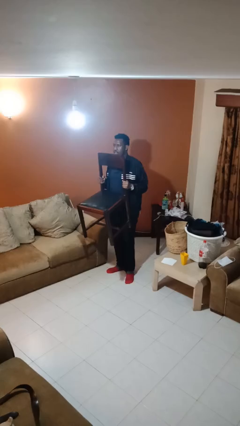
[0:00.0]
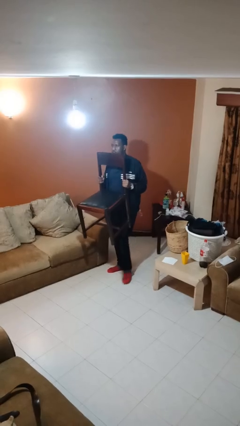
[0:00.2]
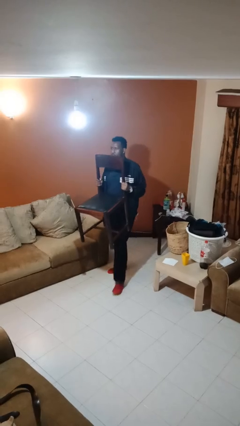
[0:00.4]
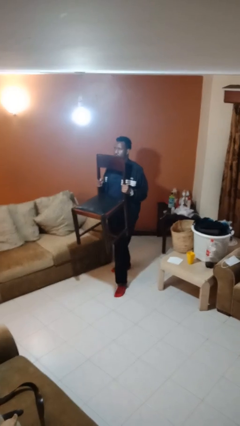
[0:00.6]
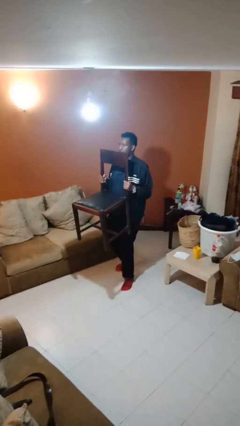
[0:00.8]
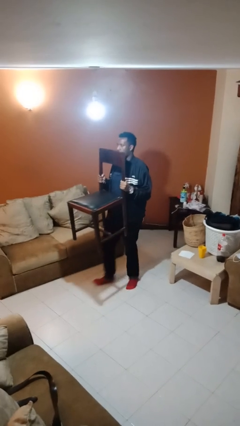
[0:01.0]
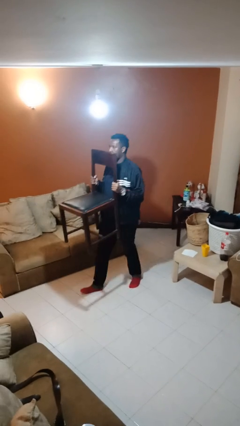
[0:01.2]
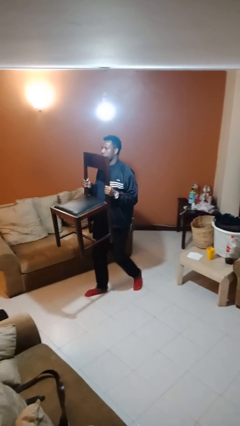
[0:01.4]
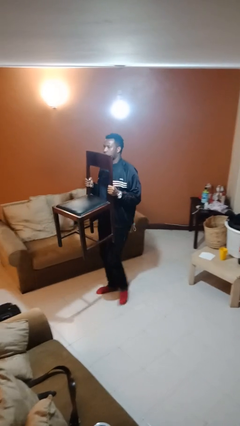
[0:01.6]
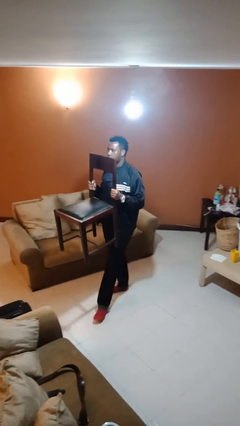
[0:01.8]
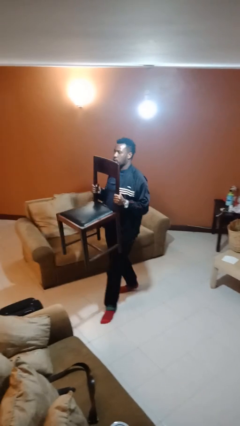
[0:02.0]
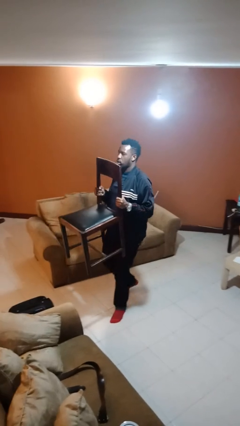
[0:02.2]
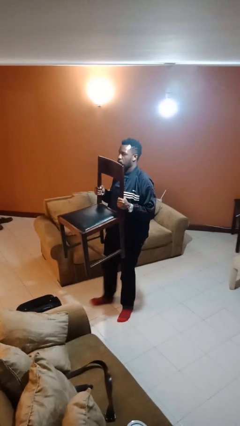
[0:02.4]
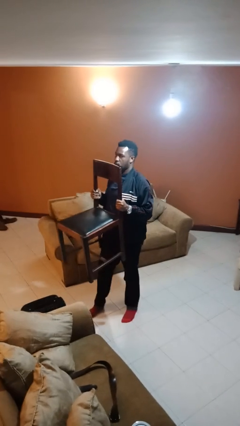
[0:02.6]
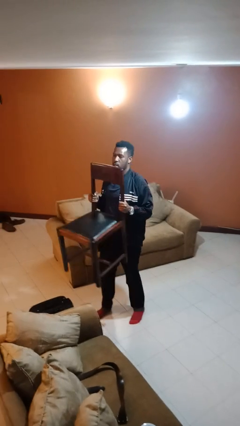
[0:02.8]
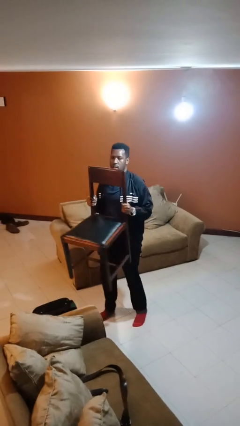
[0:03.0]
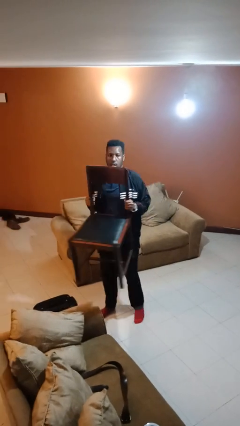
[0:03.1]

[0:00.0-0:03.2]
person carries furniture

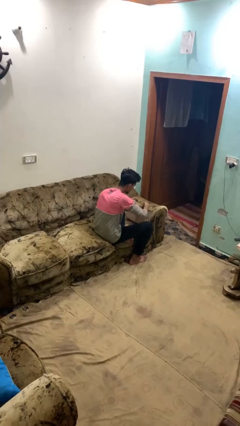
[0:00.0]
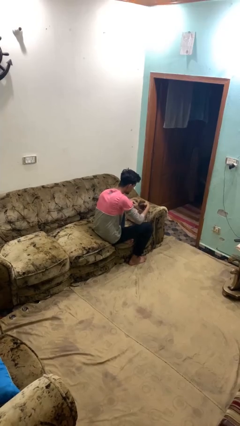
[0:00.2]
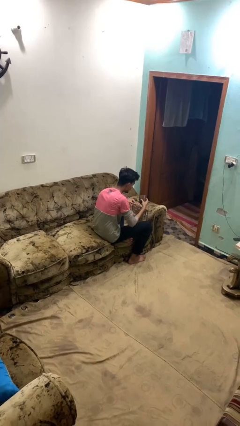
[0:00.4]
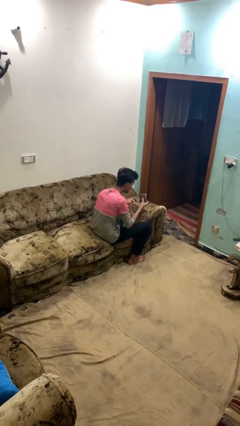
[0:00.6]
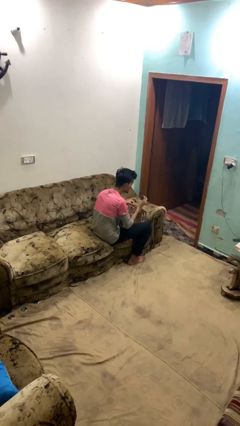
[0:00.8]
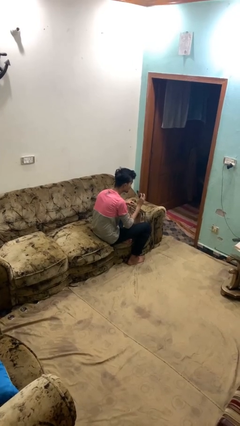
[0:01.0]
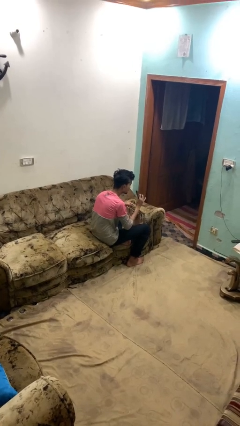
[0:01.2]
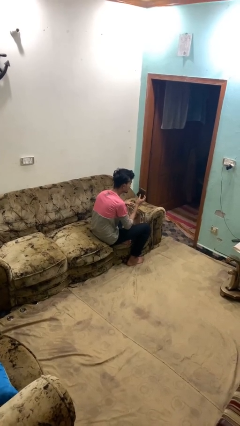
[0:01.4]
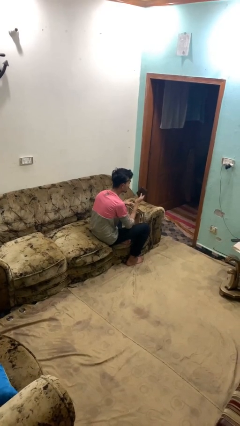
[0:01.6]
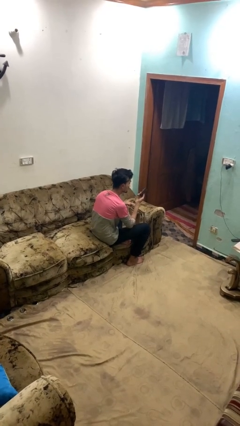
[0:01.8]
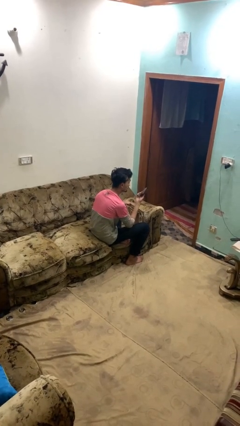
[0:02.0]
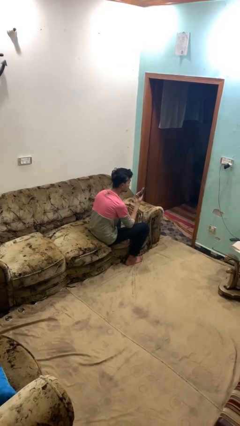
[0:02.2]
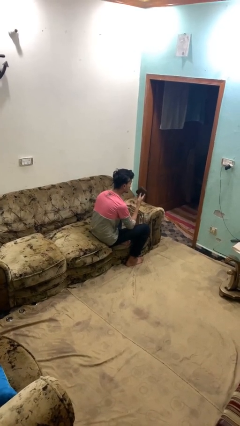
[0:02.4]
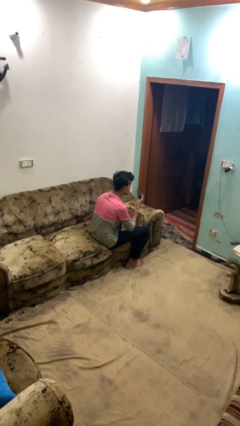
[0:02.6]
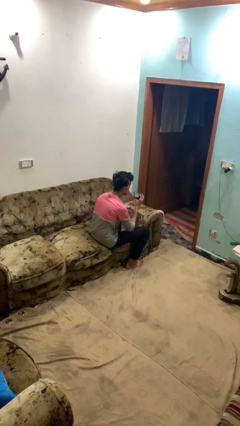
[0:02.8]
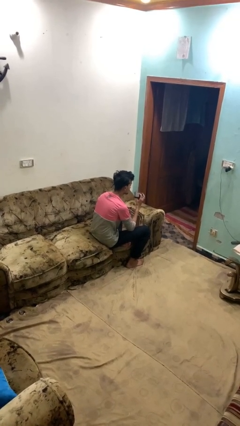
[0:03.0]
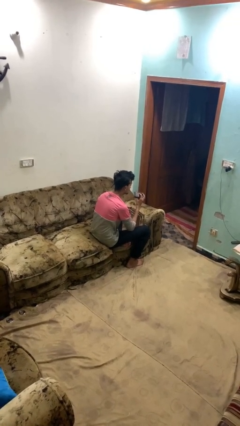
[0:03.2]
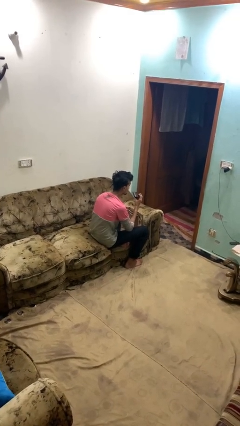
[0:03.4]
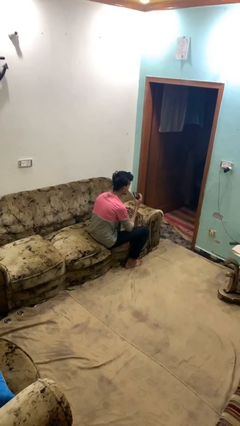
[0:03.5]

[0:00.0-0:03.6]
person takes object from purse

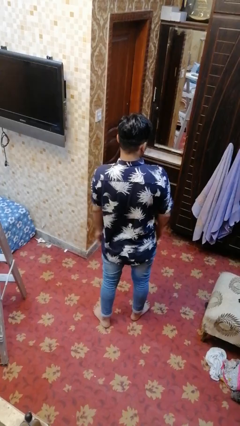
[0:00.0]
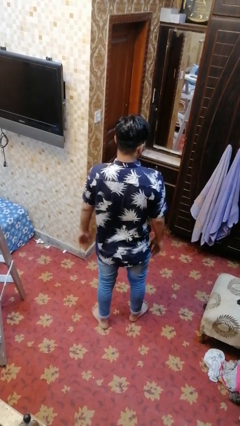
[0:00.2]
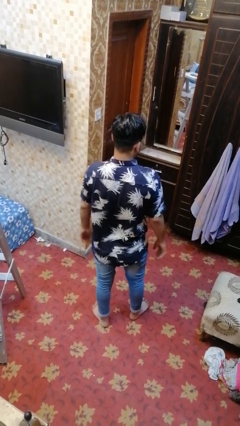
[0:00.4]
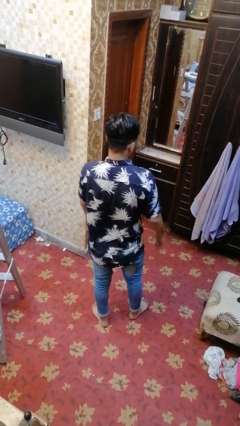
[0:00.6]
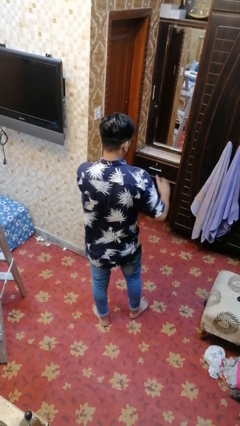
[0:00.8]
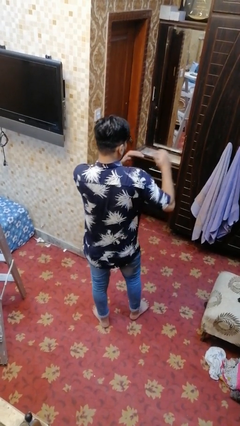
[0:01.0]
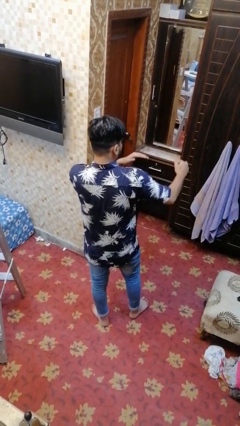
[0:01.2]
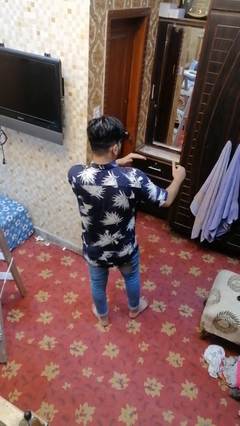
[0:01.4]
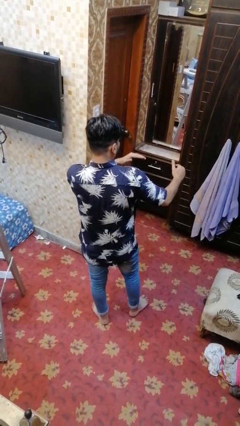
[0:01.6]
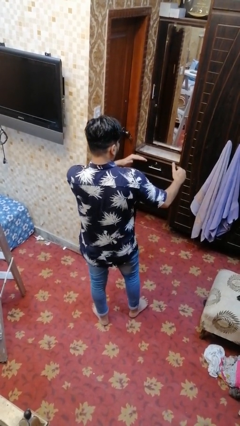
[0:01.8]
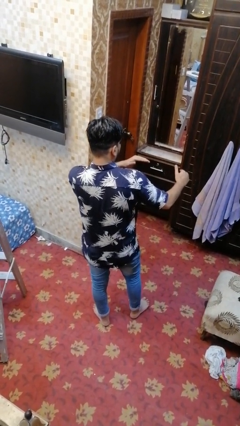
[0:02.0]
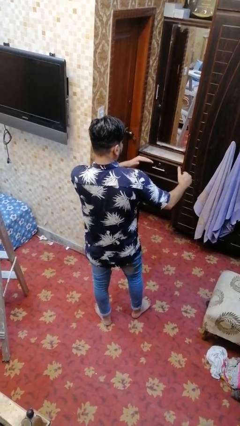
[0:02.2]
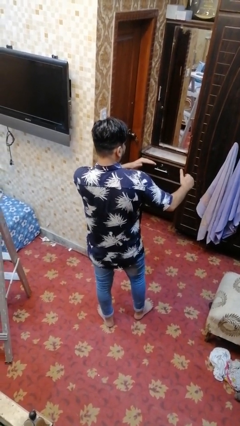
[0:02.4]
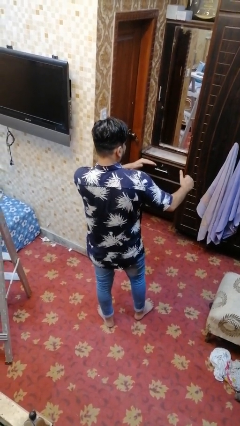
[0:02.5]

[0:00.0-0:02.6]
person karate chop

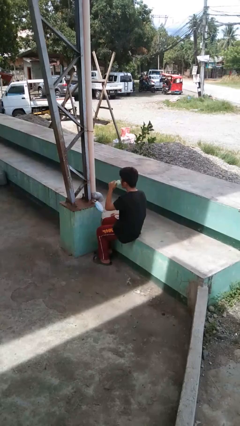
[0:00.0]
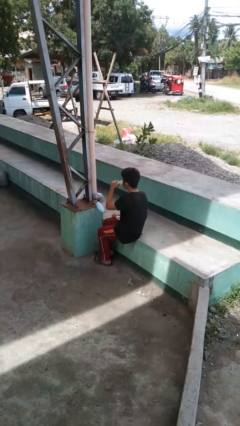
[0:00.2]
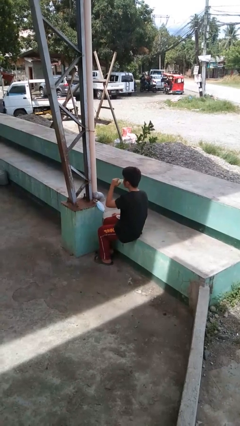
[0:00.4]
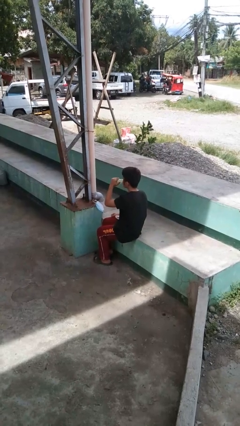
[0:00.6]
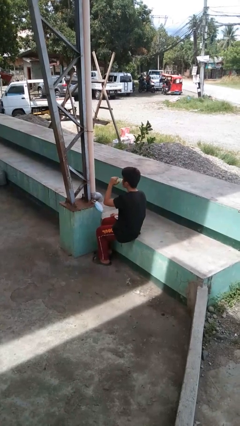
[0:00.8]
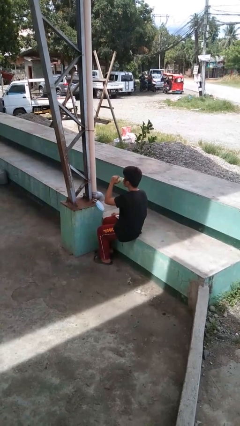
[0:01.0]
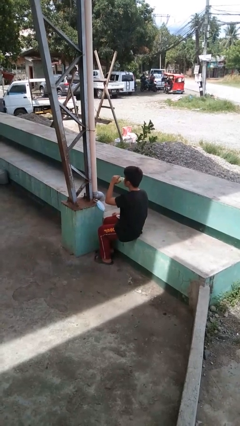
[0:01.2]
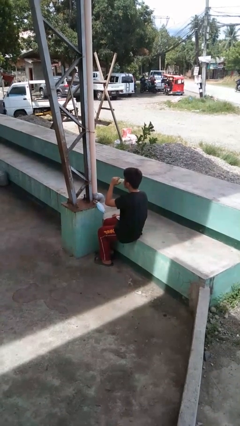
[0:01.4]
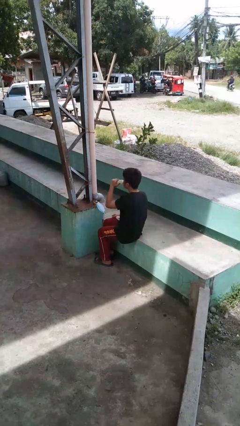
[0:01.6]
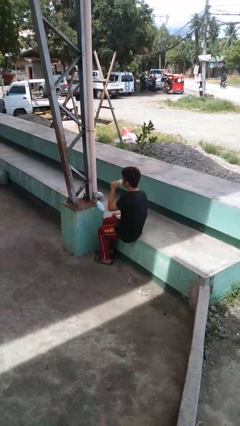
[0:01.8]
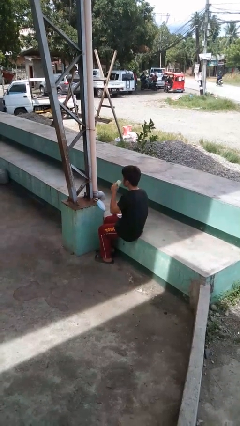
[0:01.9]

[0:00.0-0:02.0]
person drinks from bottle

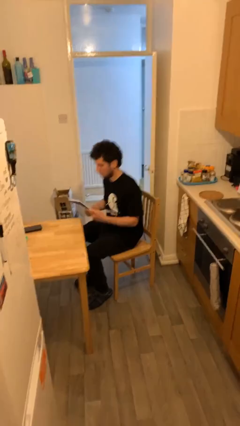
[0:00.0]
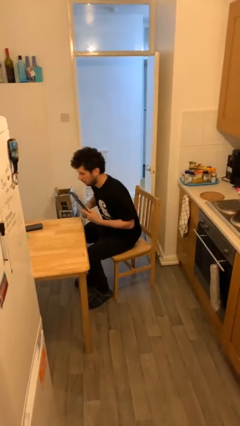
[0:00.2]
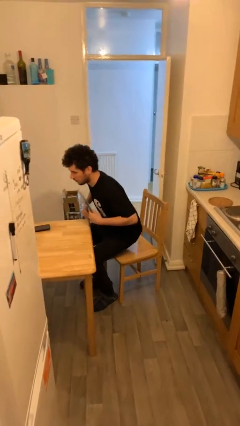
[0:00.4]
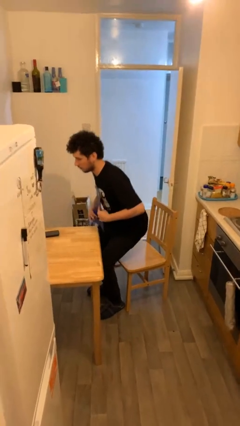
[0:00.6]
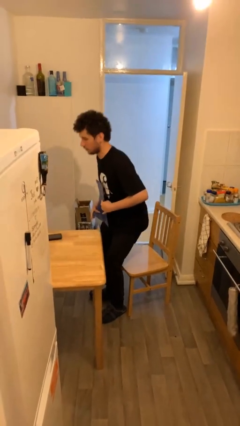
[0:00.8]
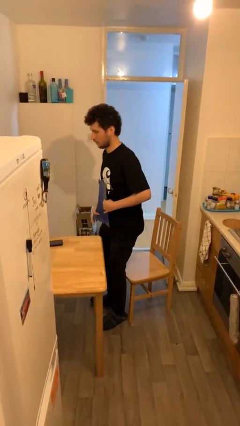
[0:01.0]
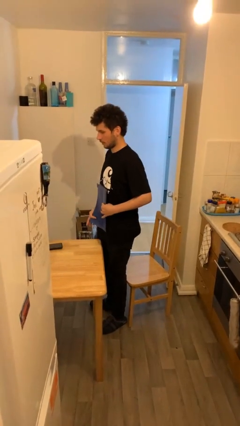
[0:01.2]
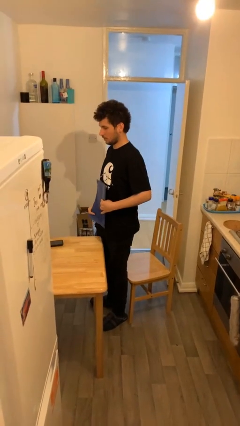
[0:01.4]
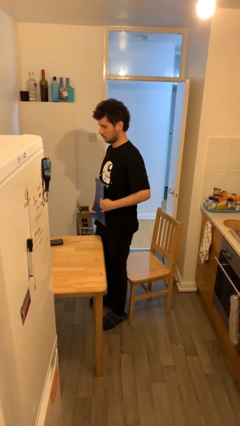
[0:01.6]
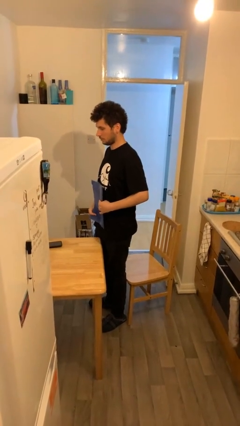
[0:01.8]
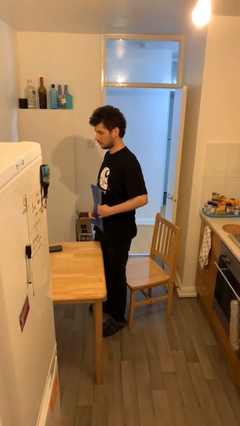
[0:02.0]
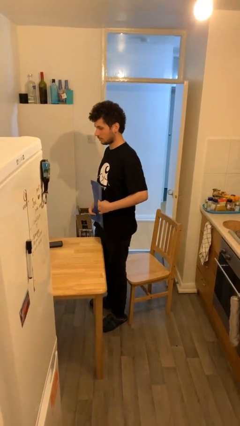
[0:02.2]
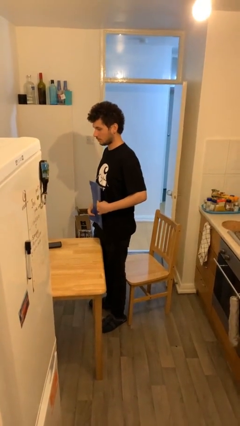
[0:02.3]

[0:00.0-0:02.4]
person stands up

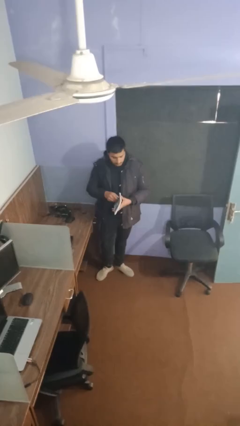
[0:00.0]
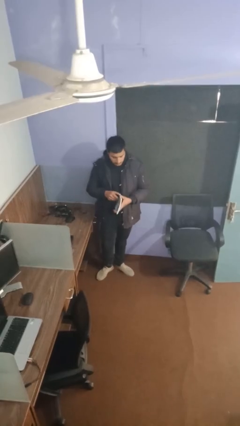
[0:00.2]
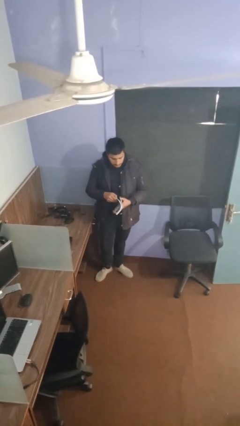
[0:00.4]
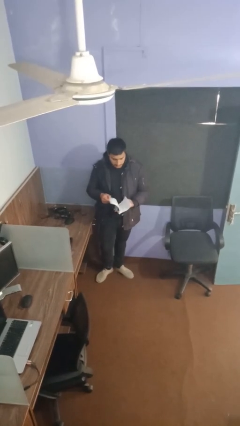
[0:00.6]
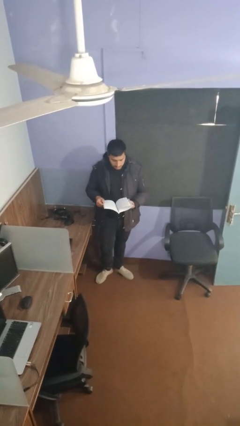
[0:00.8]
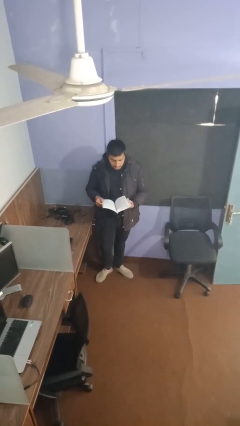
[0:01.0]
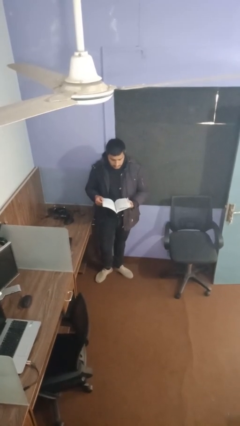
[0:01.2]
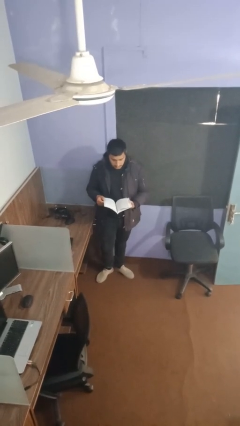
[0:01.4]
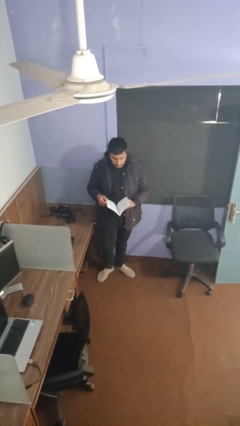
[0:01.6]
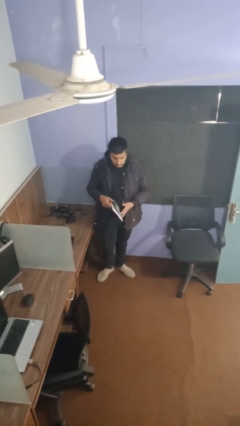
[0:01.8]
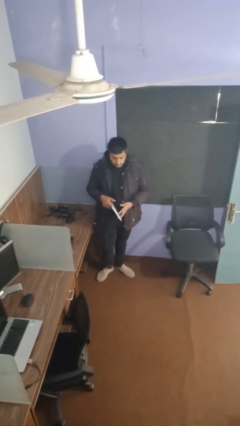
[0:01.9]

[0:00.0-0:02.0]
person reads document

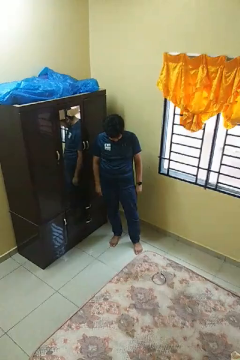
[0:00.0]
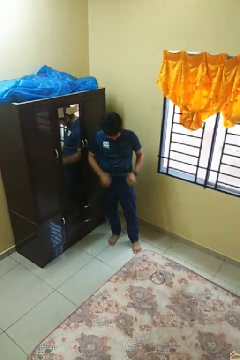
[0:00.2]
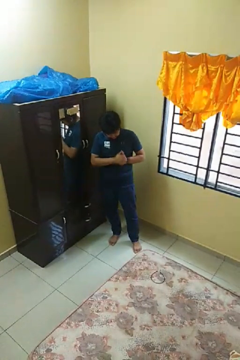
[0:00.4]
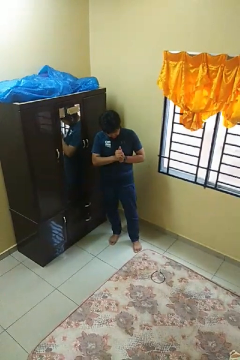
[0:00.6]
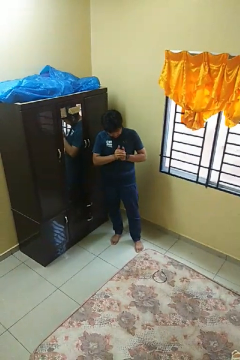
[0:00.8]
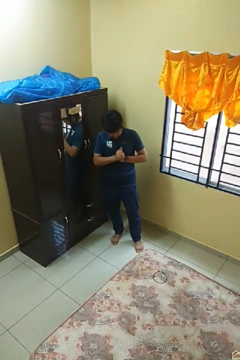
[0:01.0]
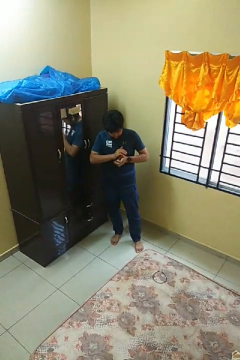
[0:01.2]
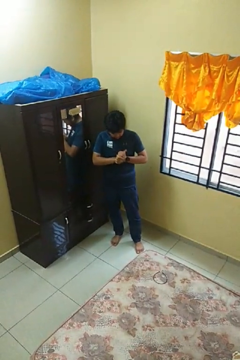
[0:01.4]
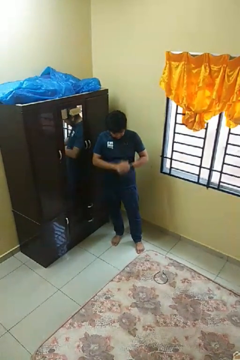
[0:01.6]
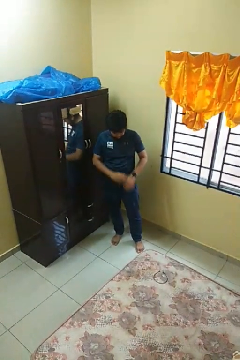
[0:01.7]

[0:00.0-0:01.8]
person cracks knuckles
